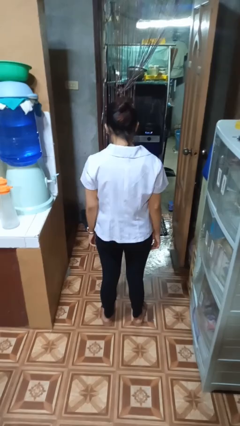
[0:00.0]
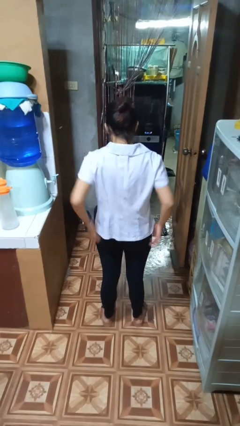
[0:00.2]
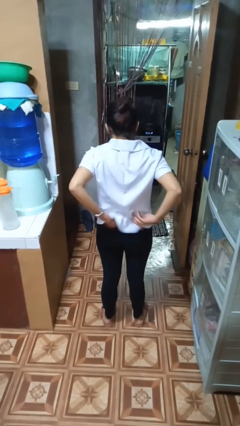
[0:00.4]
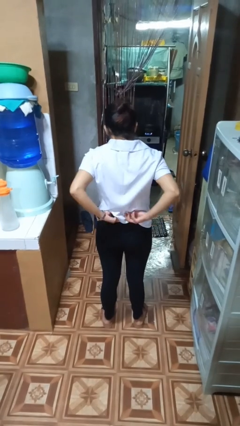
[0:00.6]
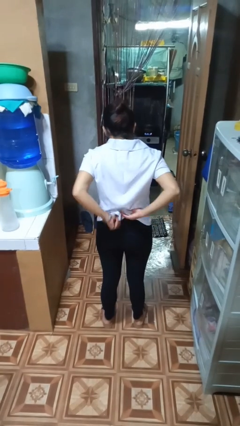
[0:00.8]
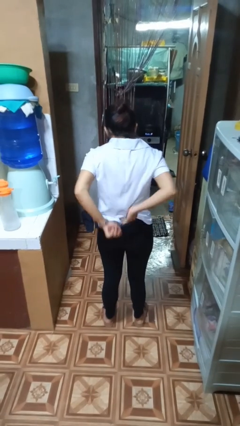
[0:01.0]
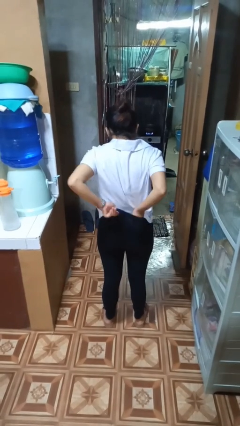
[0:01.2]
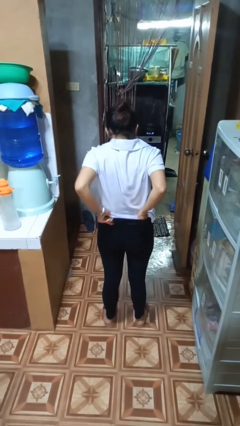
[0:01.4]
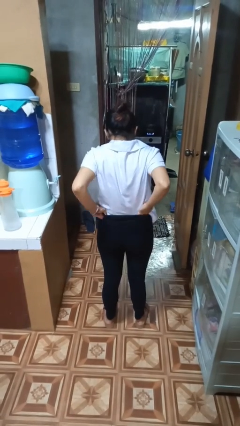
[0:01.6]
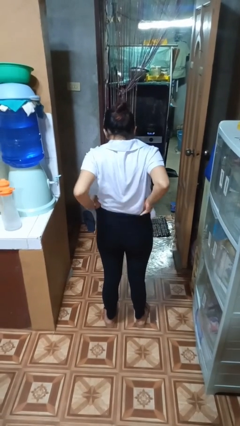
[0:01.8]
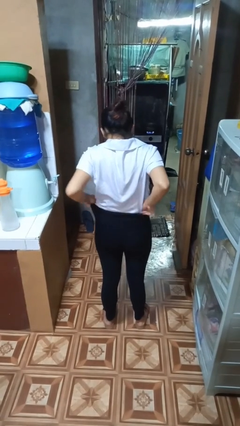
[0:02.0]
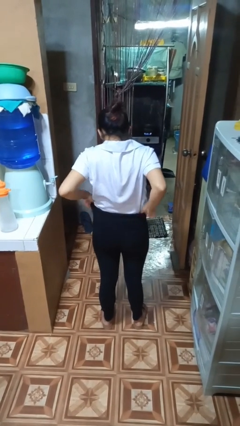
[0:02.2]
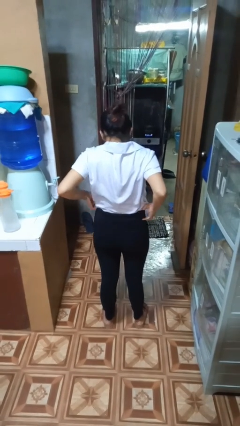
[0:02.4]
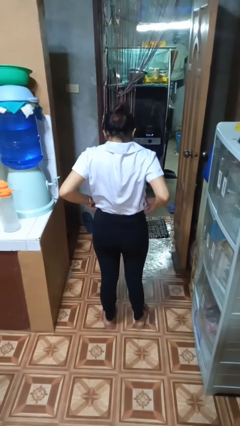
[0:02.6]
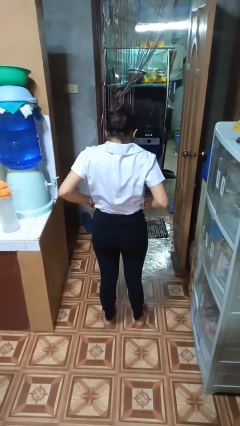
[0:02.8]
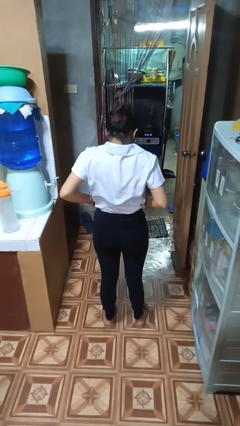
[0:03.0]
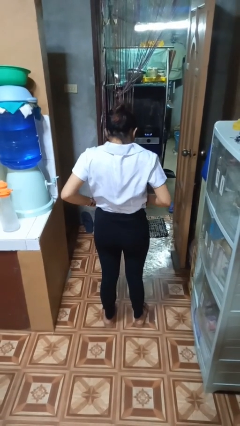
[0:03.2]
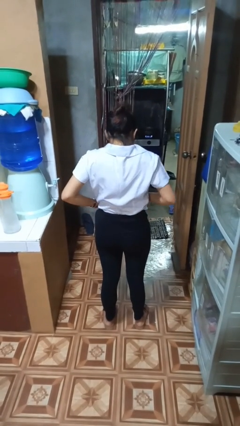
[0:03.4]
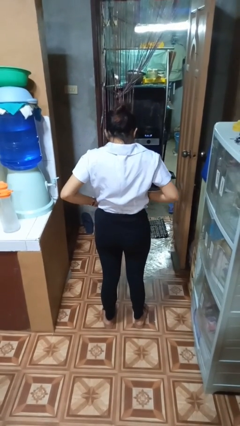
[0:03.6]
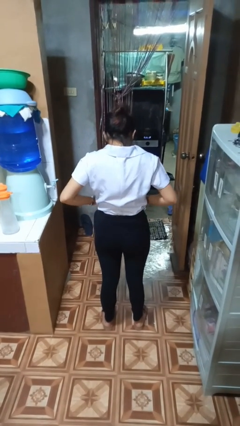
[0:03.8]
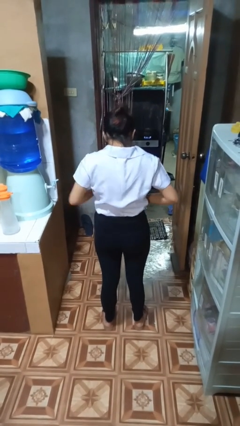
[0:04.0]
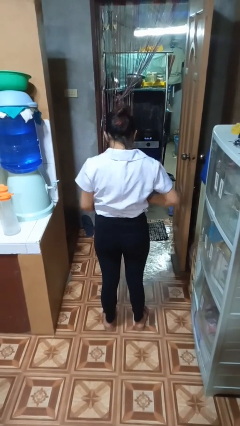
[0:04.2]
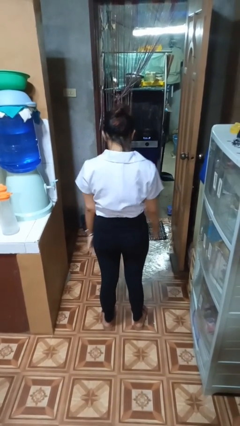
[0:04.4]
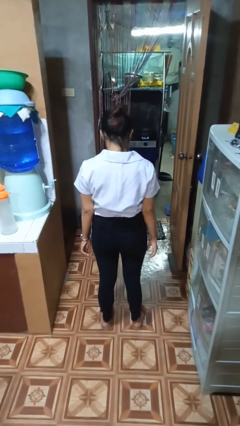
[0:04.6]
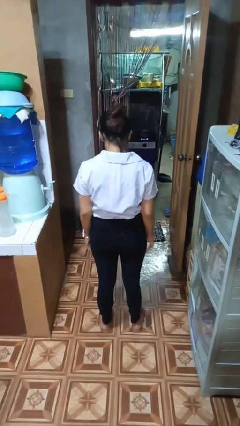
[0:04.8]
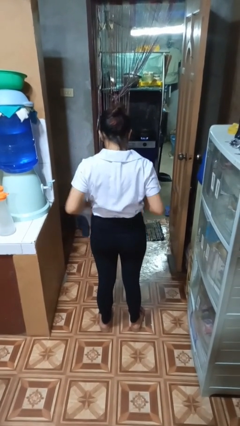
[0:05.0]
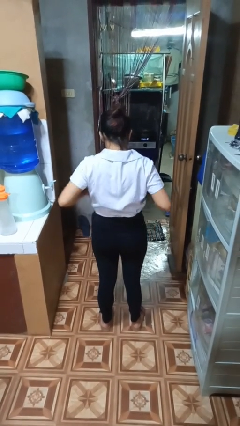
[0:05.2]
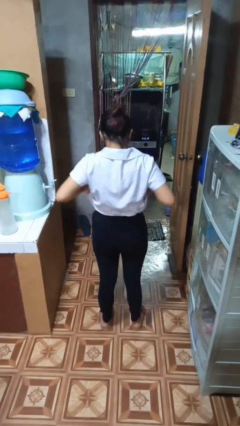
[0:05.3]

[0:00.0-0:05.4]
person tucks in shirt

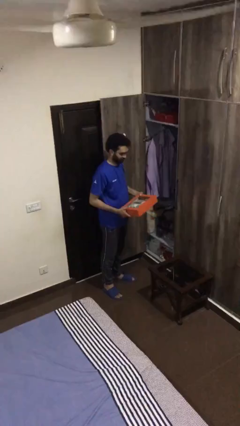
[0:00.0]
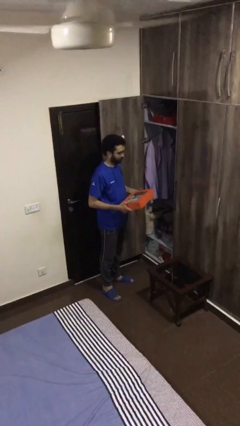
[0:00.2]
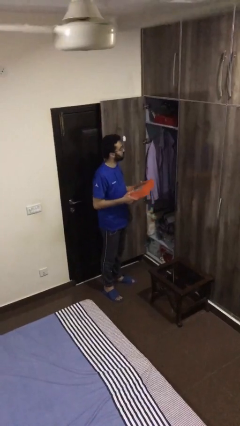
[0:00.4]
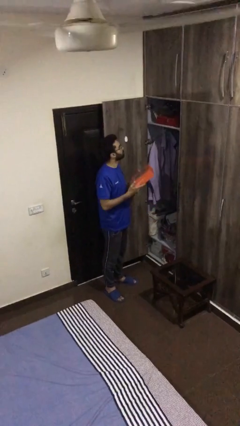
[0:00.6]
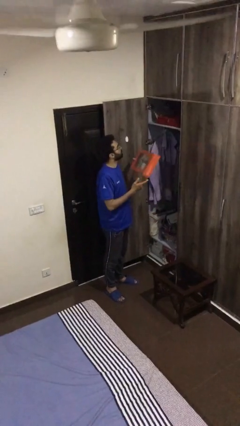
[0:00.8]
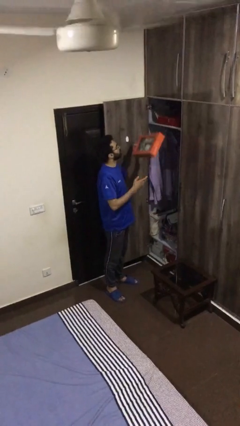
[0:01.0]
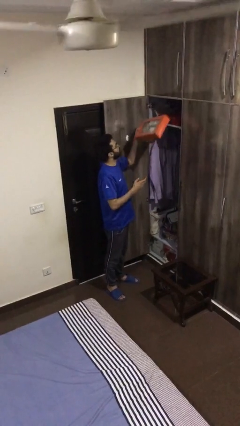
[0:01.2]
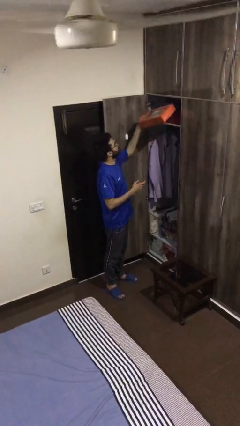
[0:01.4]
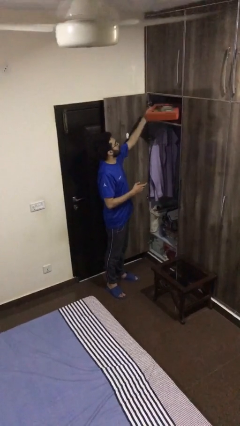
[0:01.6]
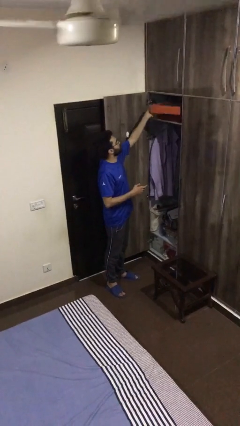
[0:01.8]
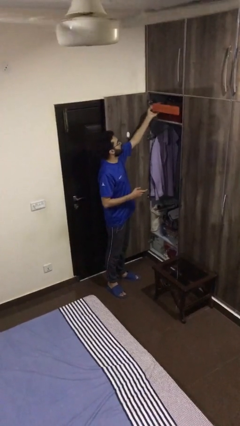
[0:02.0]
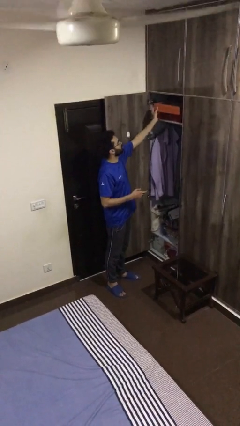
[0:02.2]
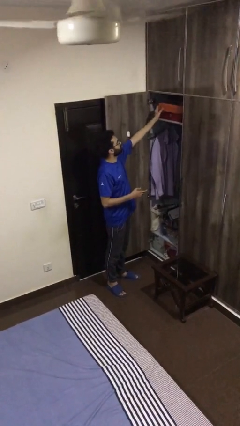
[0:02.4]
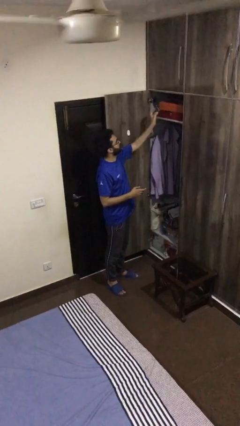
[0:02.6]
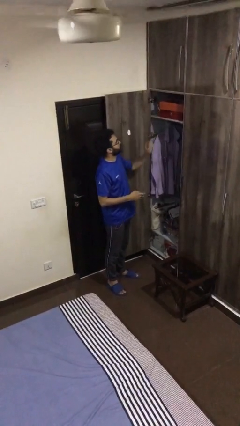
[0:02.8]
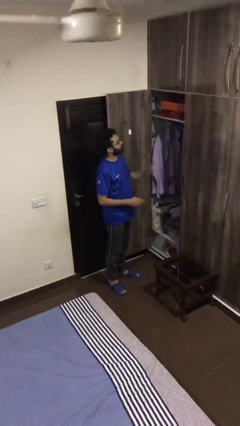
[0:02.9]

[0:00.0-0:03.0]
person puts down object on shelf

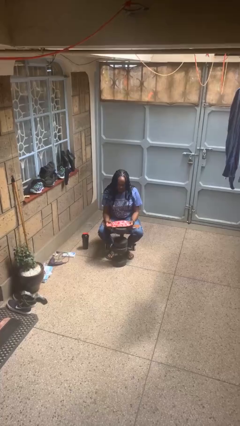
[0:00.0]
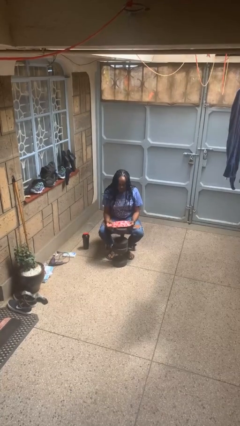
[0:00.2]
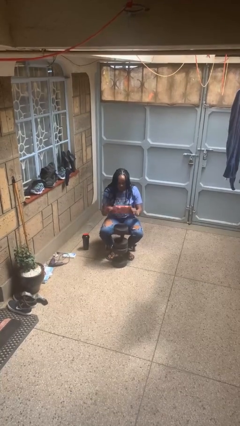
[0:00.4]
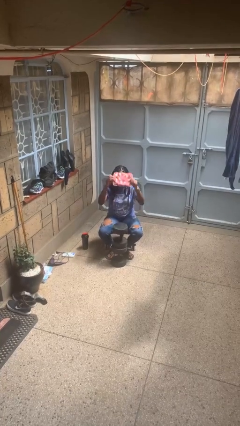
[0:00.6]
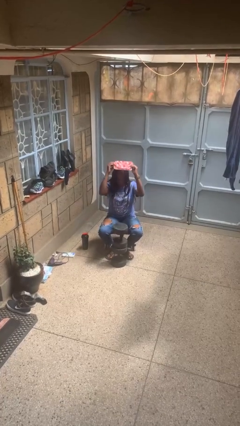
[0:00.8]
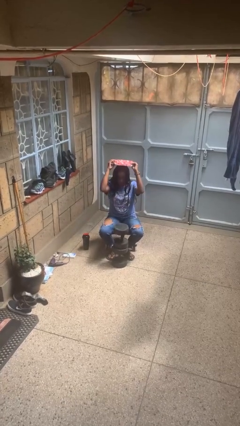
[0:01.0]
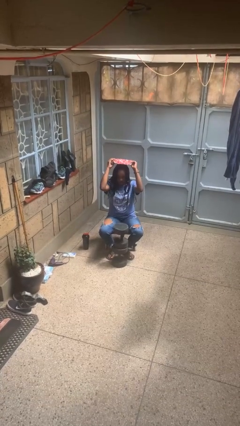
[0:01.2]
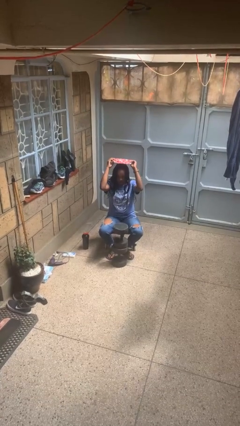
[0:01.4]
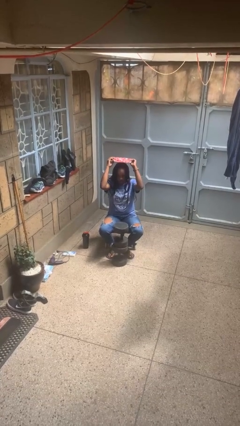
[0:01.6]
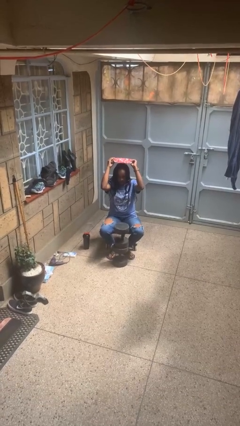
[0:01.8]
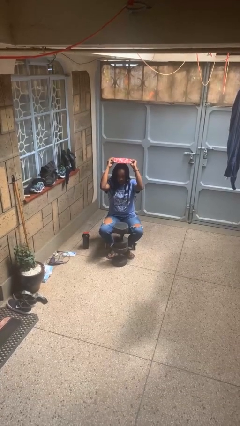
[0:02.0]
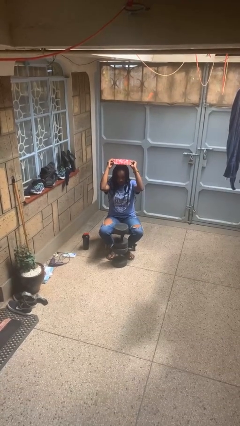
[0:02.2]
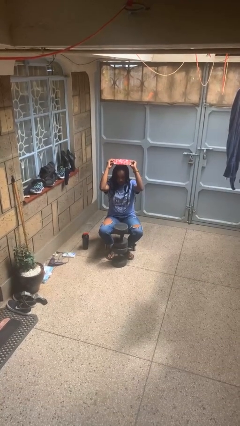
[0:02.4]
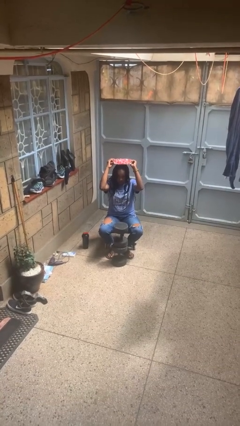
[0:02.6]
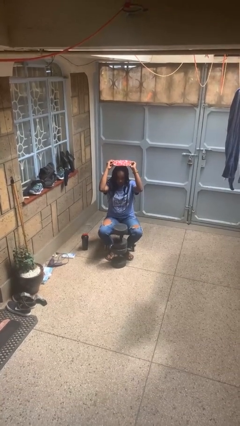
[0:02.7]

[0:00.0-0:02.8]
person holds object above head

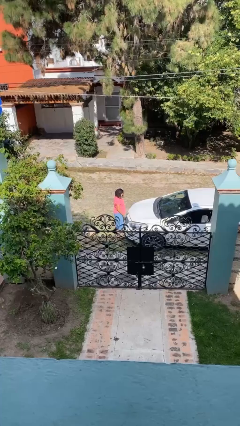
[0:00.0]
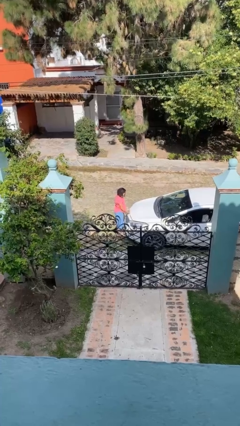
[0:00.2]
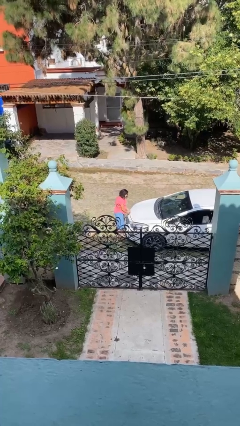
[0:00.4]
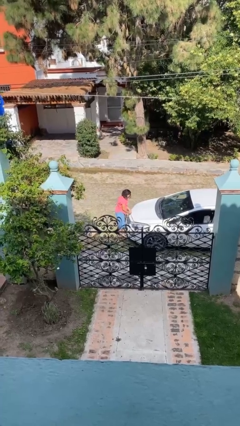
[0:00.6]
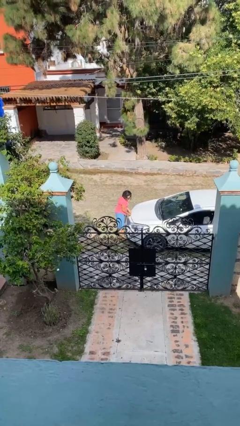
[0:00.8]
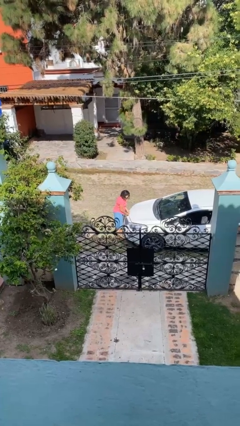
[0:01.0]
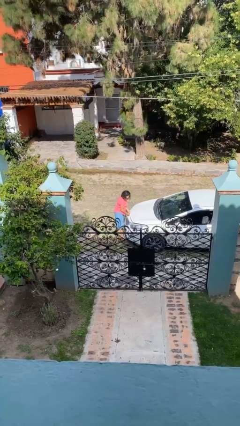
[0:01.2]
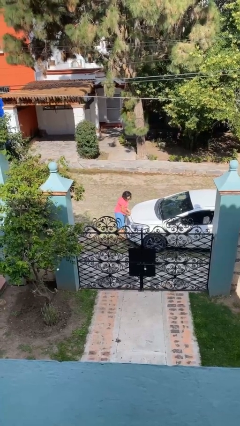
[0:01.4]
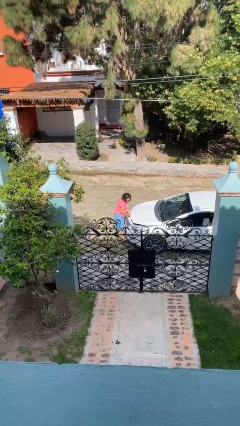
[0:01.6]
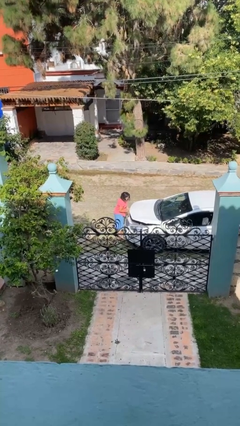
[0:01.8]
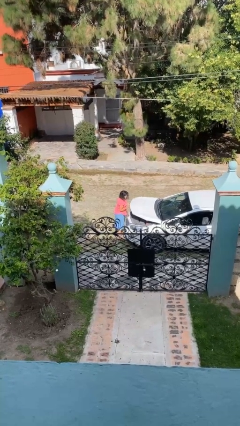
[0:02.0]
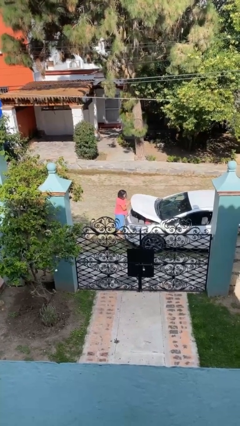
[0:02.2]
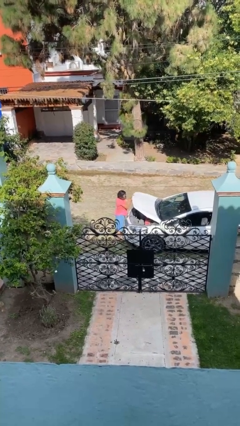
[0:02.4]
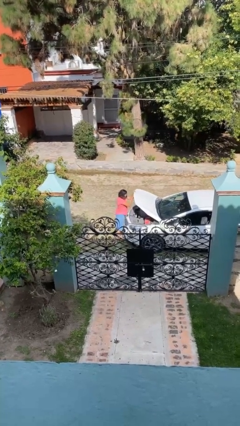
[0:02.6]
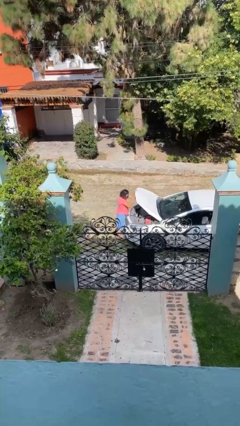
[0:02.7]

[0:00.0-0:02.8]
person opens car hood

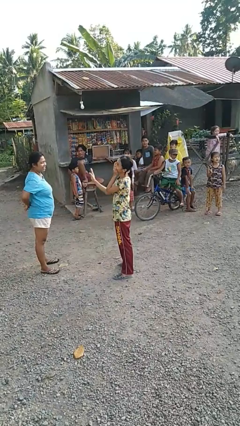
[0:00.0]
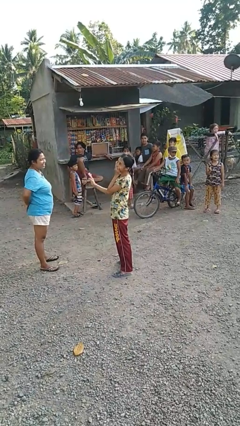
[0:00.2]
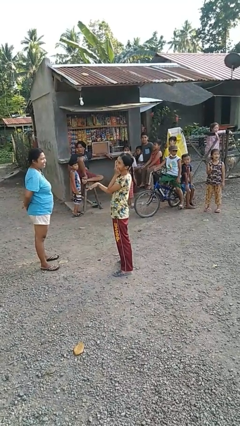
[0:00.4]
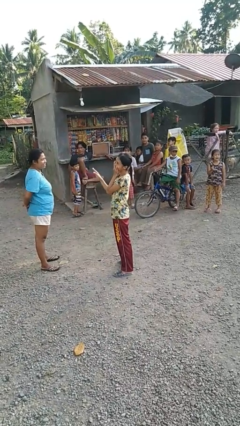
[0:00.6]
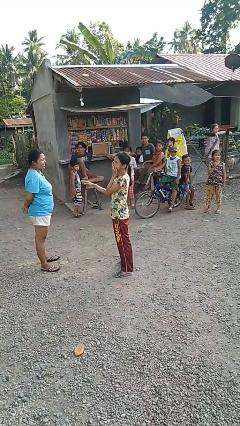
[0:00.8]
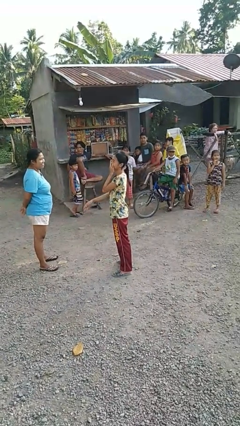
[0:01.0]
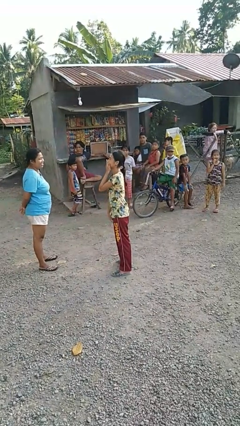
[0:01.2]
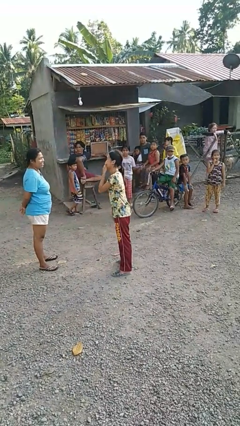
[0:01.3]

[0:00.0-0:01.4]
person laughs with person

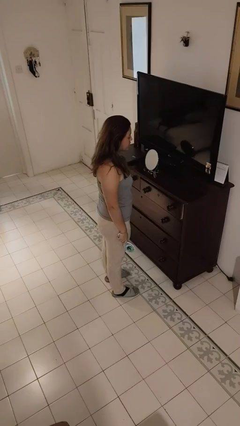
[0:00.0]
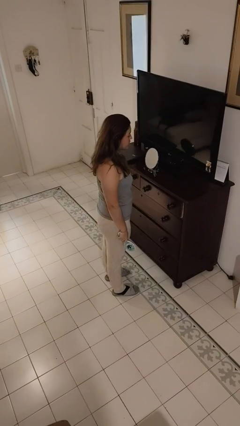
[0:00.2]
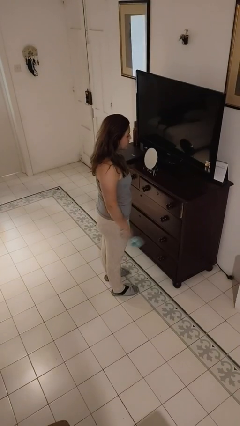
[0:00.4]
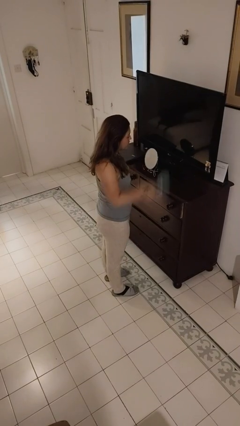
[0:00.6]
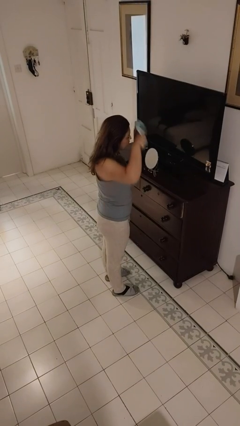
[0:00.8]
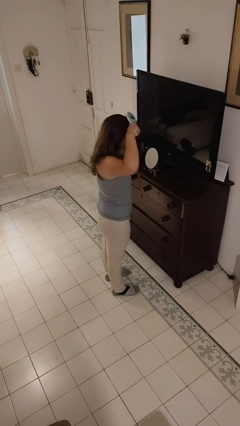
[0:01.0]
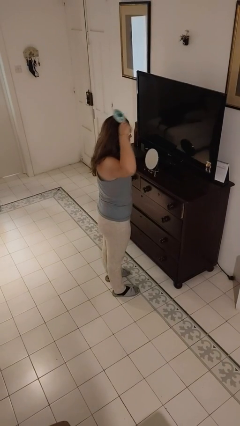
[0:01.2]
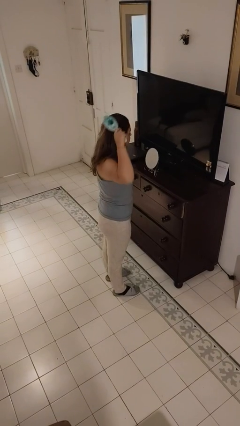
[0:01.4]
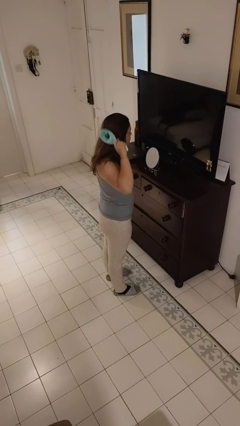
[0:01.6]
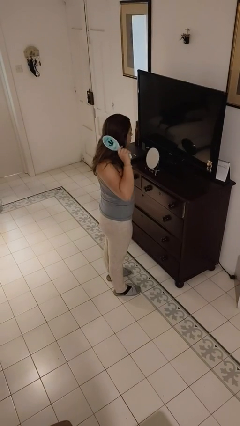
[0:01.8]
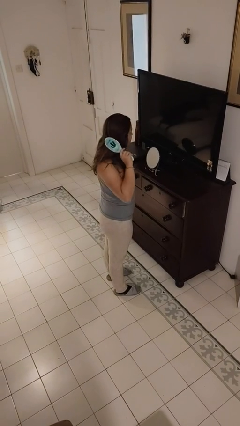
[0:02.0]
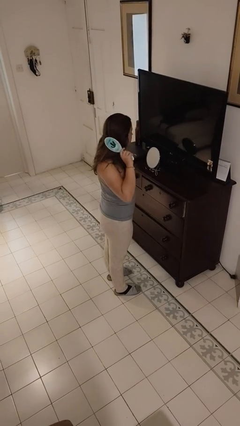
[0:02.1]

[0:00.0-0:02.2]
person brushes hair
